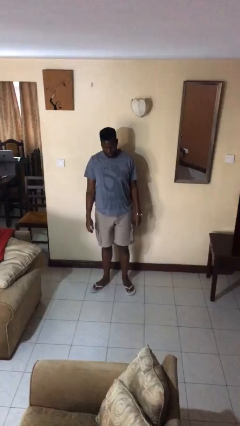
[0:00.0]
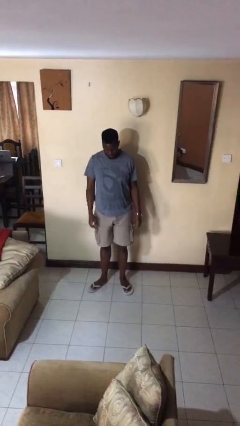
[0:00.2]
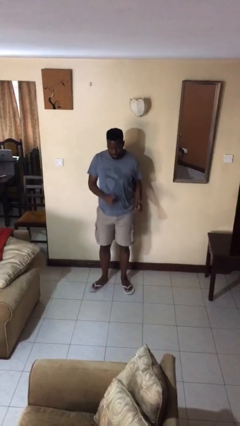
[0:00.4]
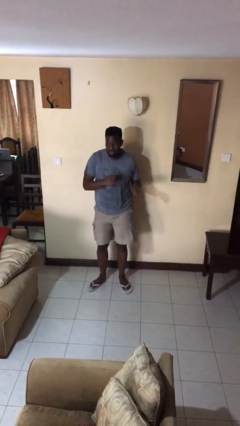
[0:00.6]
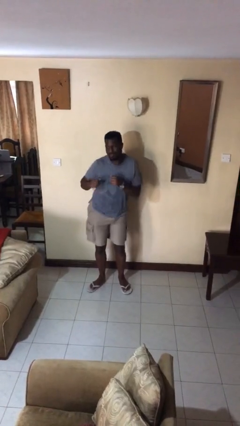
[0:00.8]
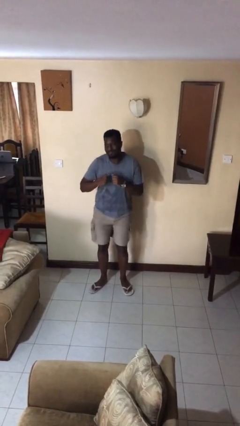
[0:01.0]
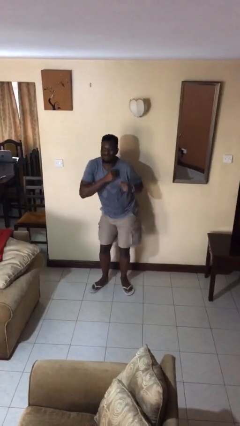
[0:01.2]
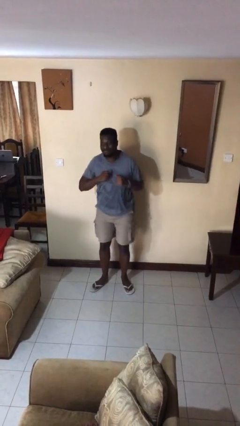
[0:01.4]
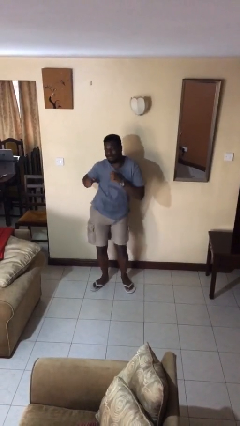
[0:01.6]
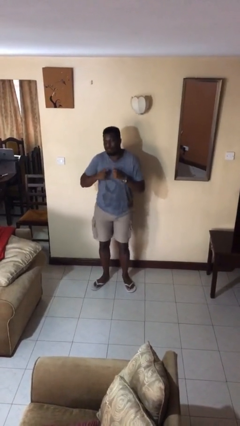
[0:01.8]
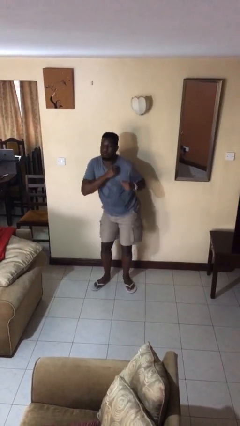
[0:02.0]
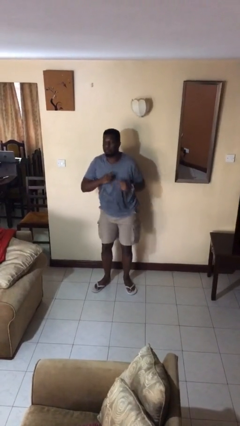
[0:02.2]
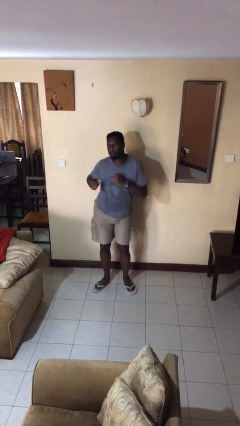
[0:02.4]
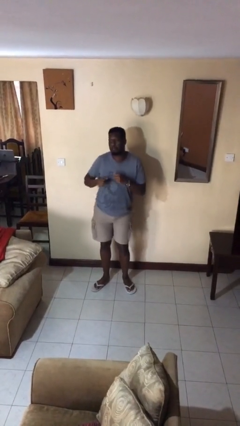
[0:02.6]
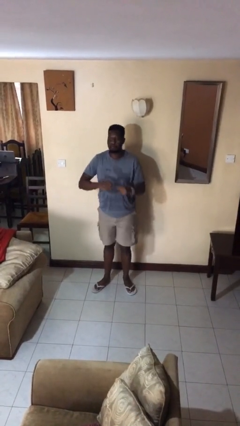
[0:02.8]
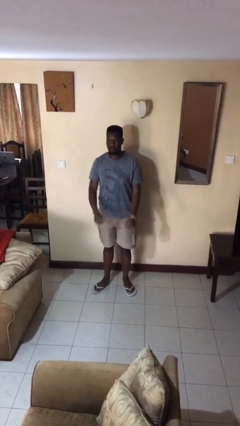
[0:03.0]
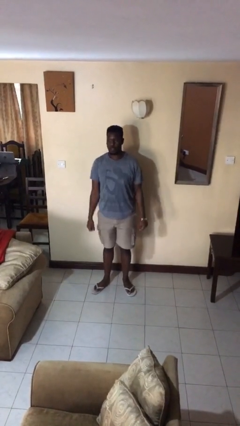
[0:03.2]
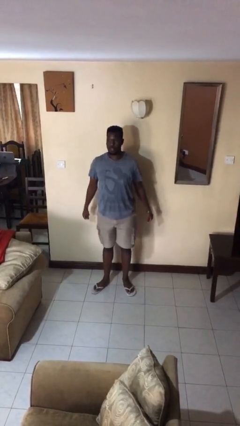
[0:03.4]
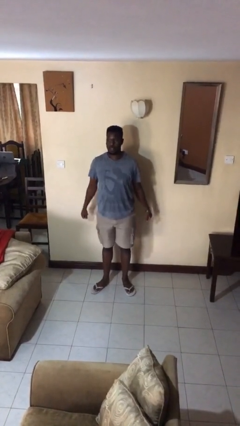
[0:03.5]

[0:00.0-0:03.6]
person wiggles hips

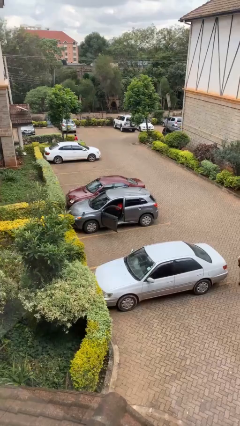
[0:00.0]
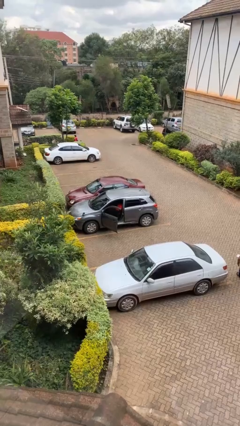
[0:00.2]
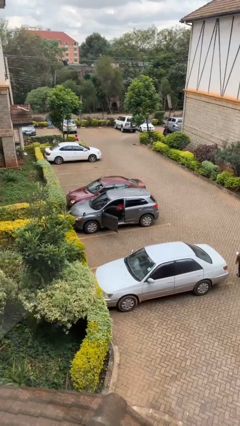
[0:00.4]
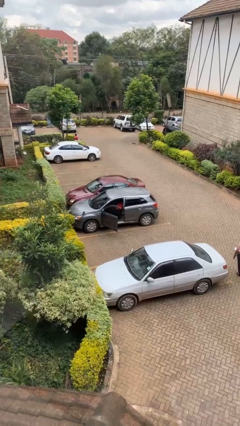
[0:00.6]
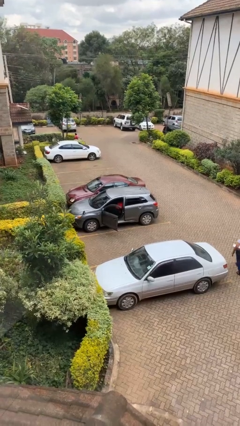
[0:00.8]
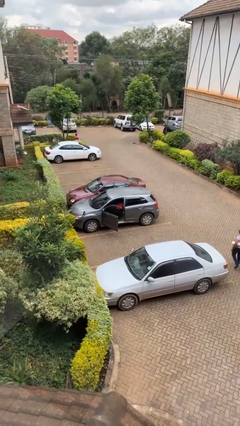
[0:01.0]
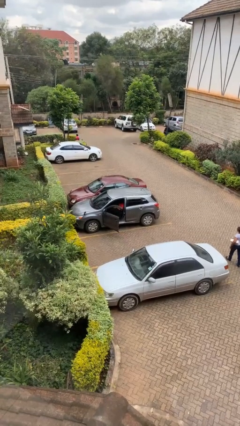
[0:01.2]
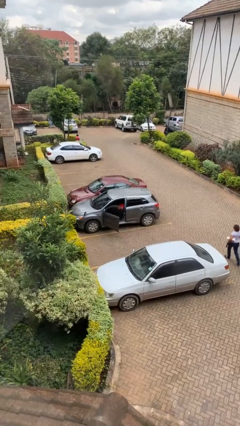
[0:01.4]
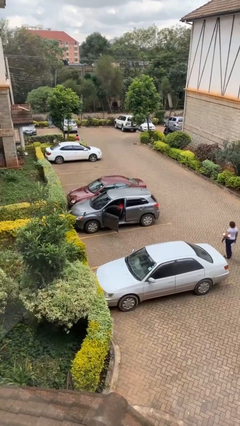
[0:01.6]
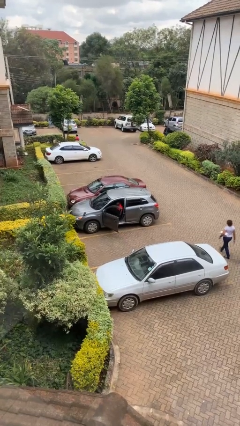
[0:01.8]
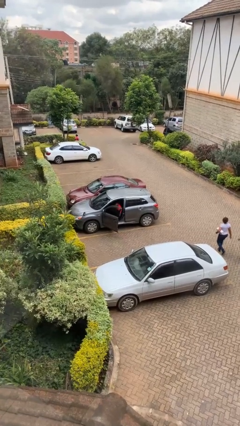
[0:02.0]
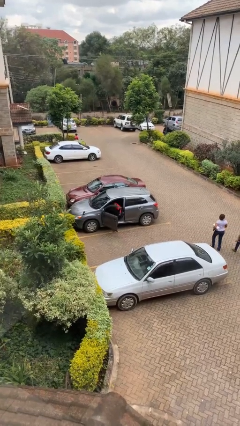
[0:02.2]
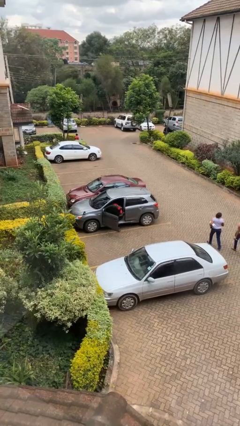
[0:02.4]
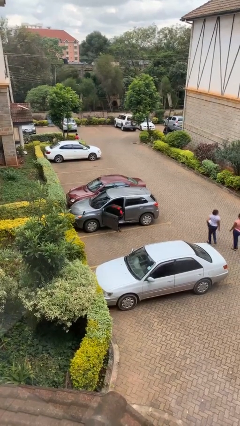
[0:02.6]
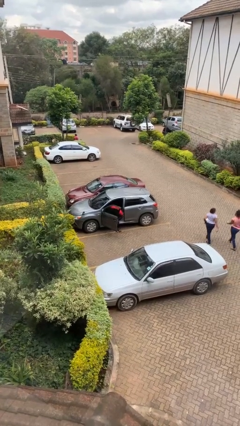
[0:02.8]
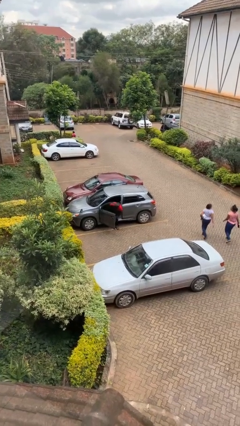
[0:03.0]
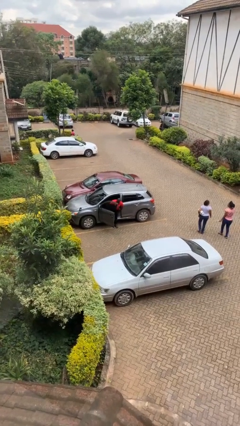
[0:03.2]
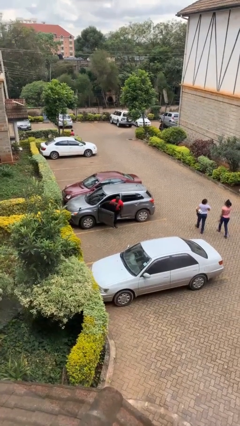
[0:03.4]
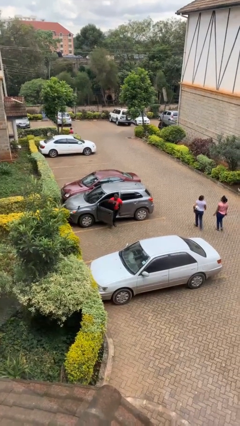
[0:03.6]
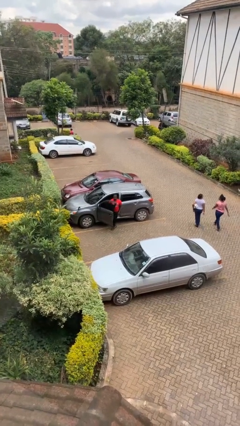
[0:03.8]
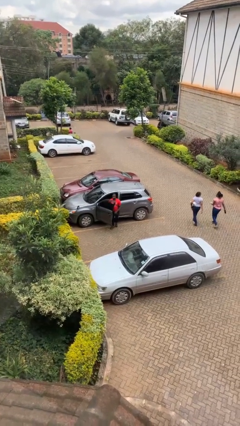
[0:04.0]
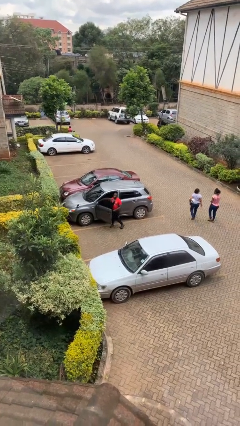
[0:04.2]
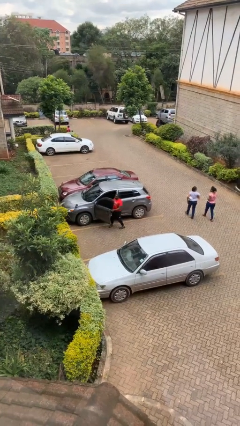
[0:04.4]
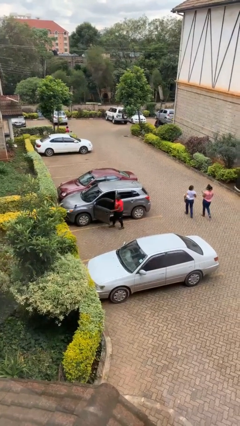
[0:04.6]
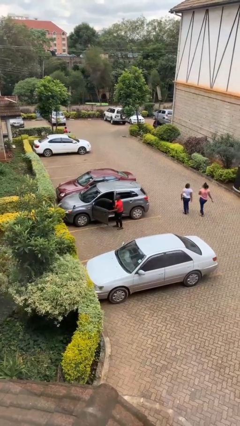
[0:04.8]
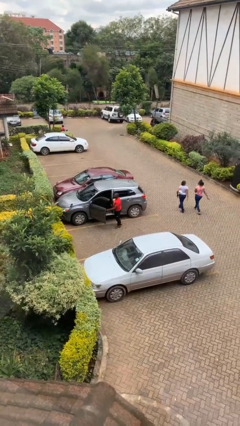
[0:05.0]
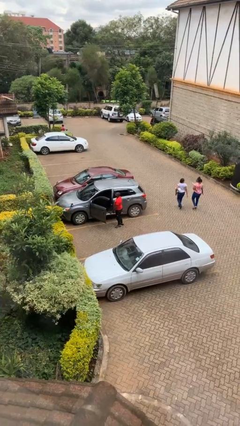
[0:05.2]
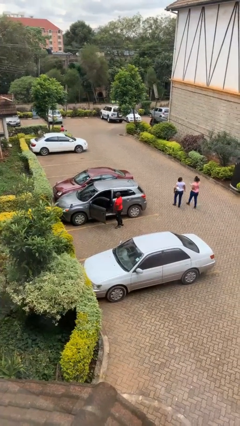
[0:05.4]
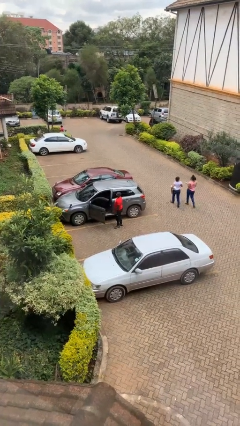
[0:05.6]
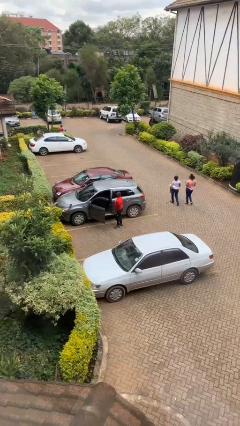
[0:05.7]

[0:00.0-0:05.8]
person exits car

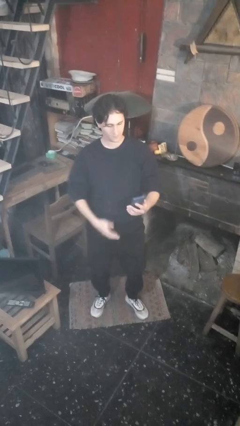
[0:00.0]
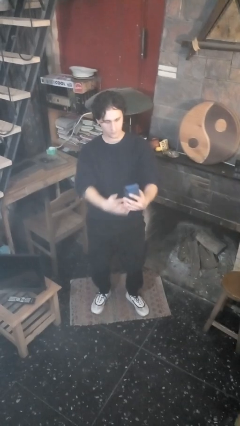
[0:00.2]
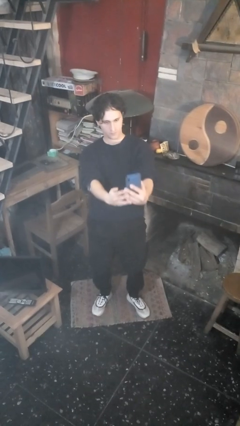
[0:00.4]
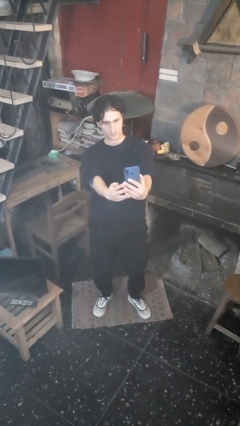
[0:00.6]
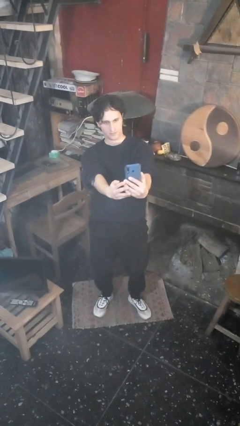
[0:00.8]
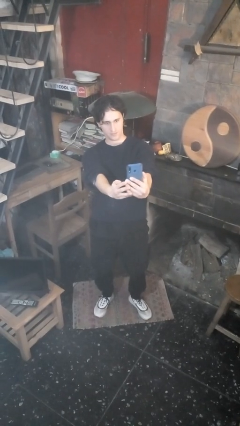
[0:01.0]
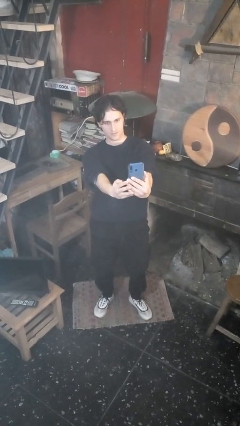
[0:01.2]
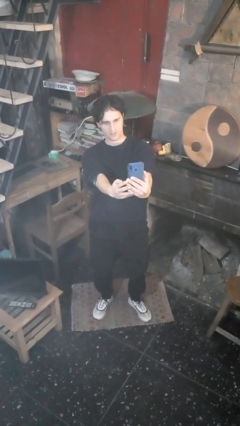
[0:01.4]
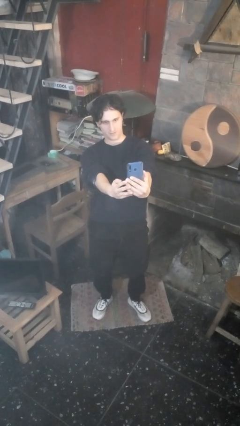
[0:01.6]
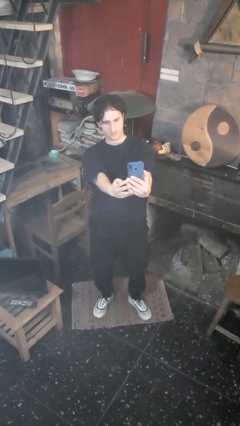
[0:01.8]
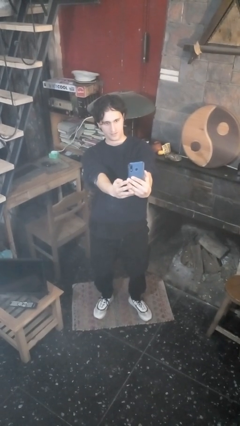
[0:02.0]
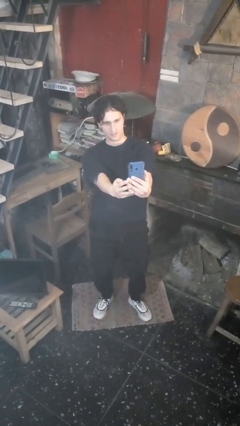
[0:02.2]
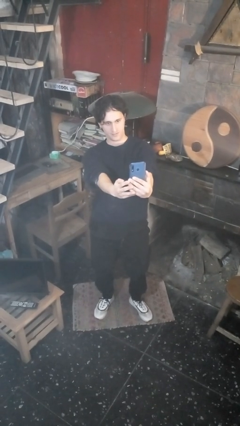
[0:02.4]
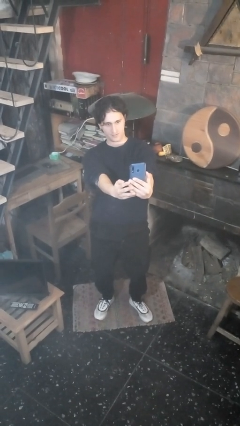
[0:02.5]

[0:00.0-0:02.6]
person takes selfie

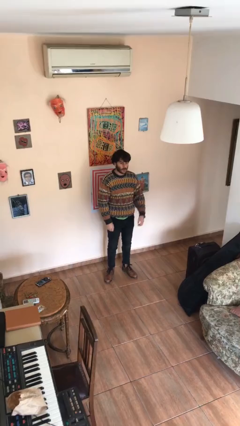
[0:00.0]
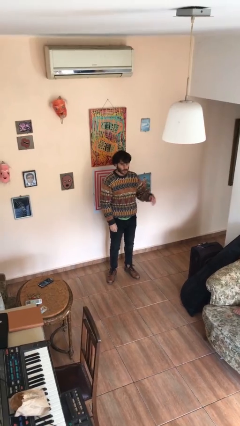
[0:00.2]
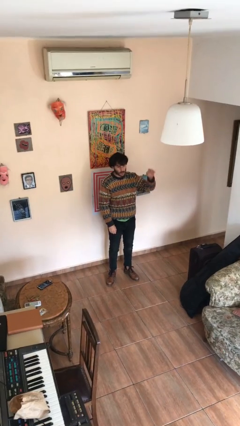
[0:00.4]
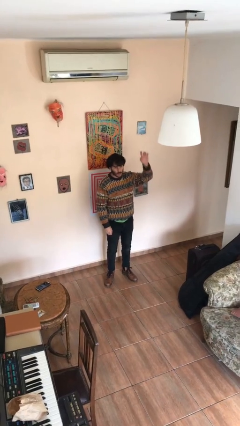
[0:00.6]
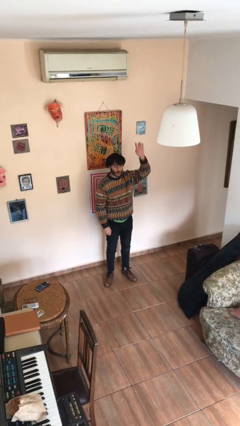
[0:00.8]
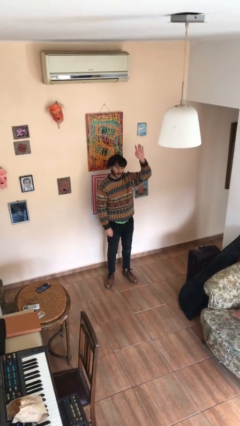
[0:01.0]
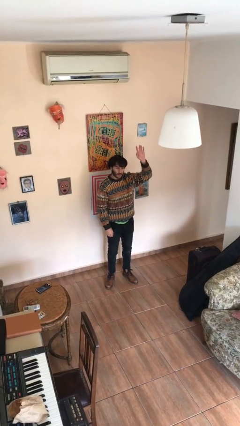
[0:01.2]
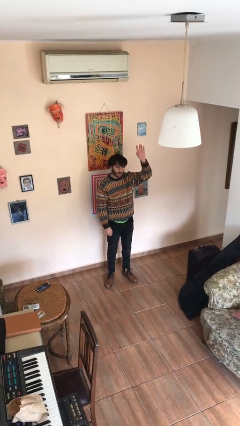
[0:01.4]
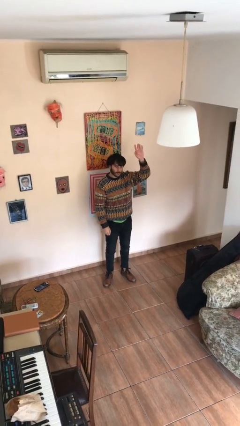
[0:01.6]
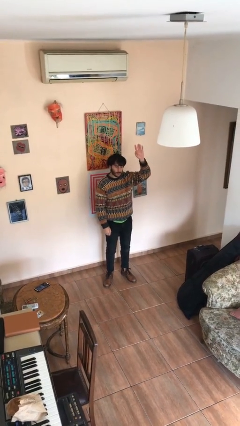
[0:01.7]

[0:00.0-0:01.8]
person gestures raise hand

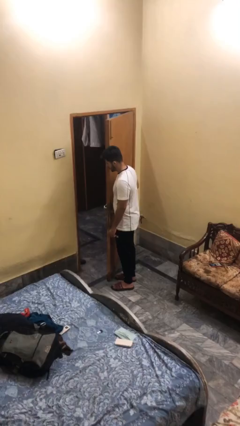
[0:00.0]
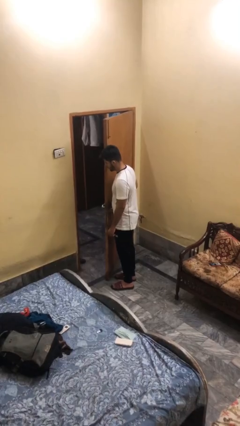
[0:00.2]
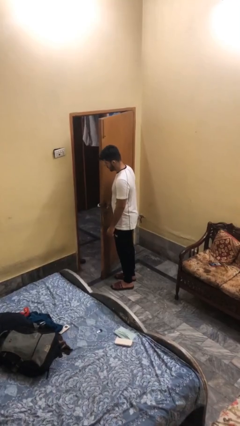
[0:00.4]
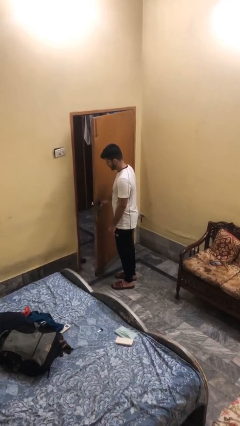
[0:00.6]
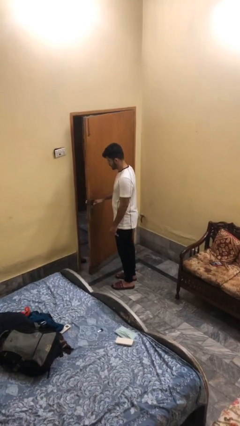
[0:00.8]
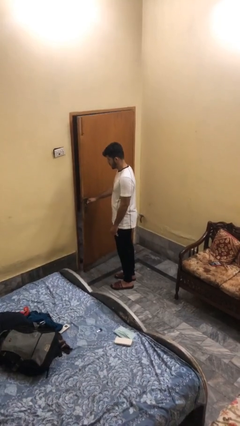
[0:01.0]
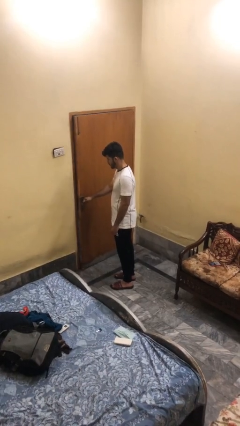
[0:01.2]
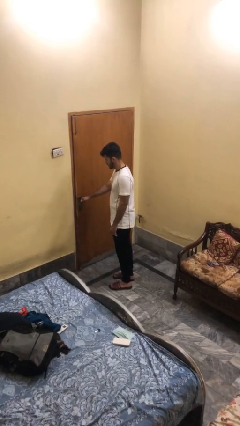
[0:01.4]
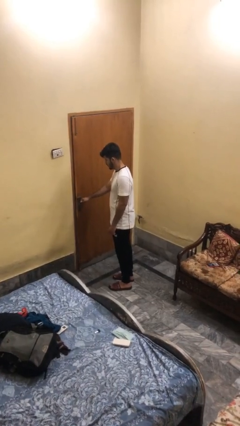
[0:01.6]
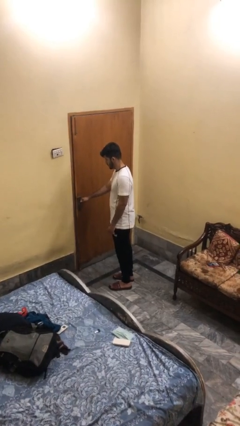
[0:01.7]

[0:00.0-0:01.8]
person closes facility door

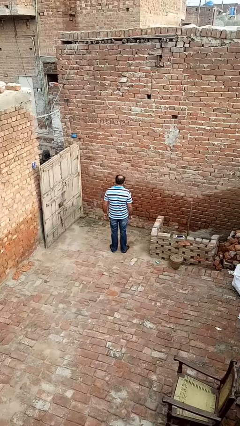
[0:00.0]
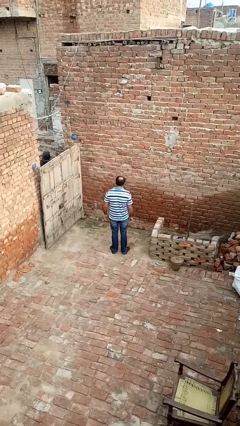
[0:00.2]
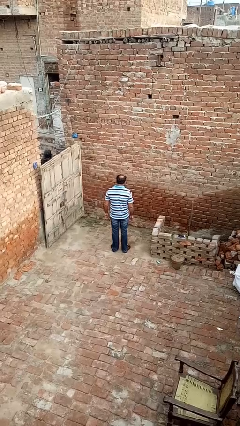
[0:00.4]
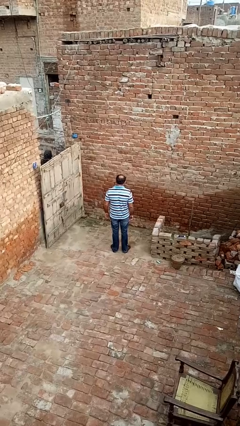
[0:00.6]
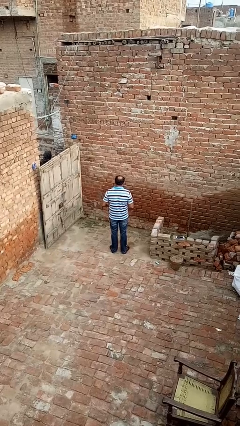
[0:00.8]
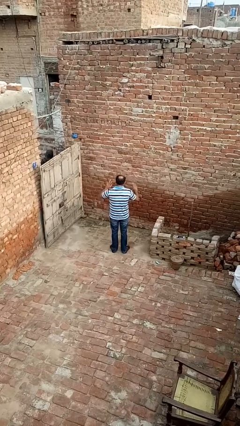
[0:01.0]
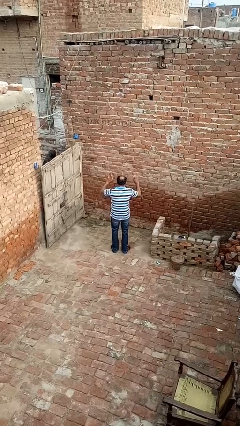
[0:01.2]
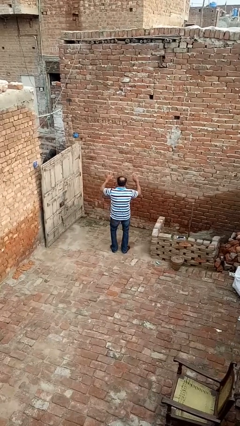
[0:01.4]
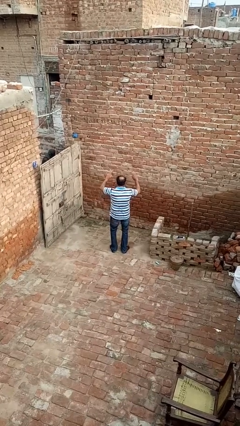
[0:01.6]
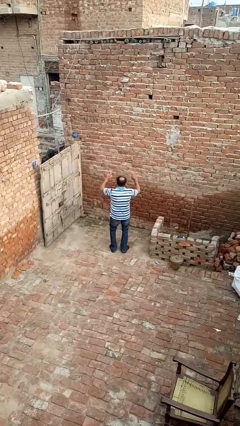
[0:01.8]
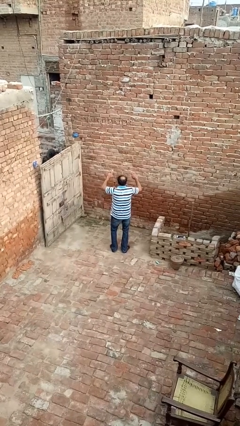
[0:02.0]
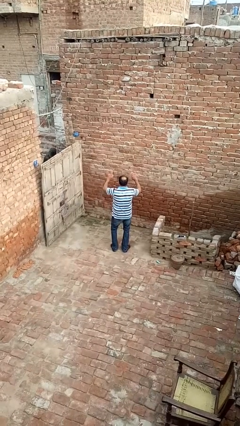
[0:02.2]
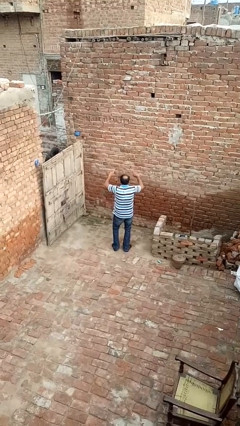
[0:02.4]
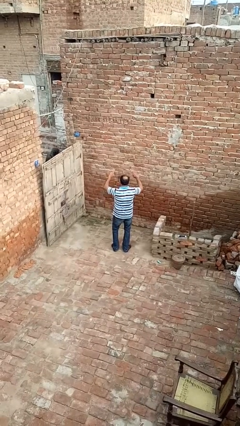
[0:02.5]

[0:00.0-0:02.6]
person dances in place
